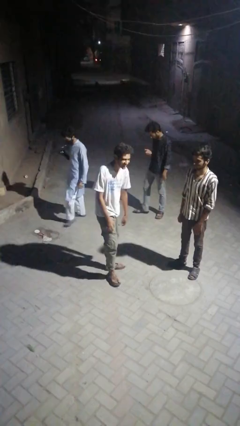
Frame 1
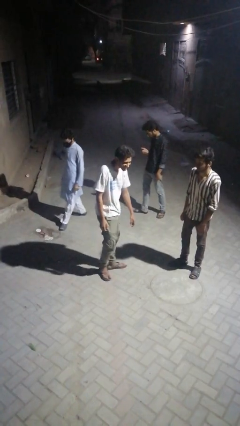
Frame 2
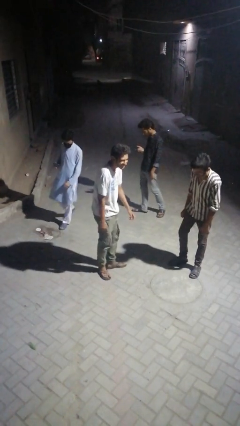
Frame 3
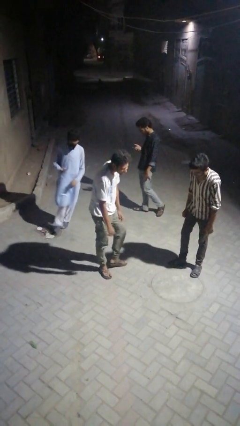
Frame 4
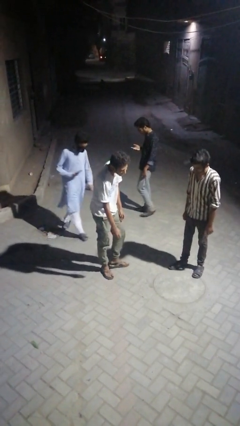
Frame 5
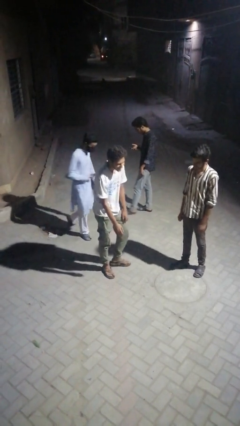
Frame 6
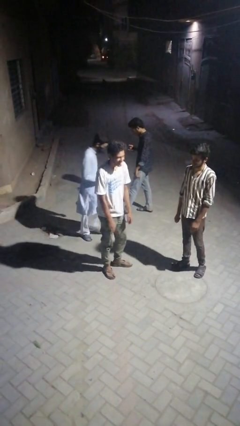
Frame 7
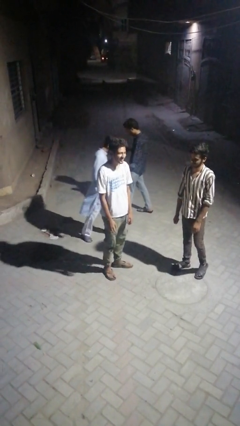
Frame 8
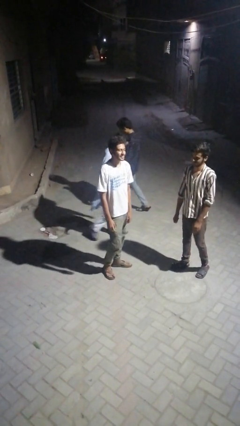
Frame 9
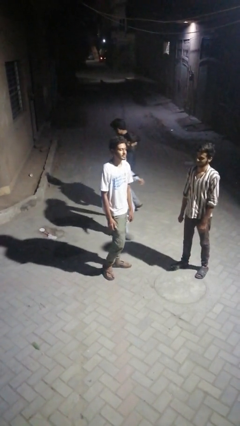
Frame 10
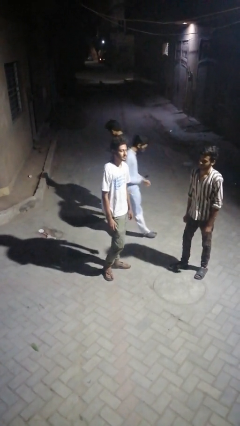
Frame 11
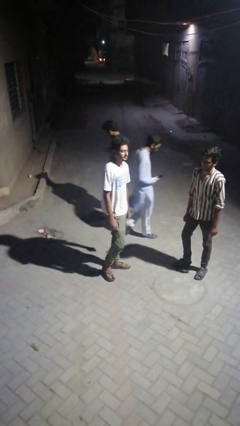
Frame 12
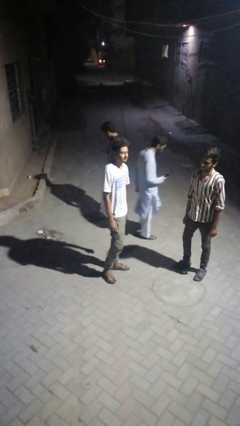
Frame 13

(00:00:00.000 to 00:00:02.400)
person laughs with person

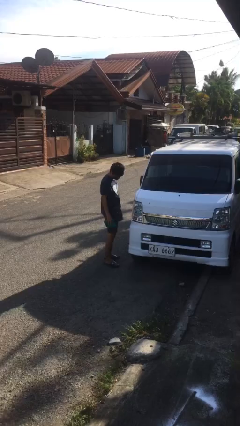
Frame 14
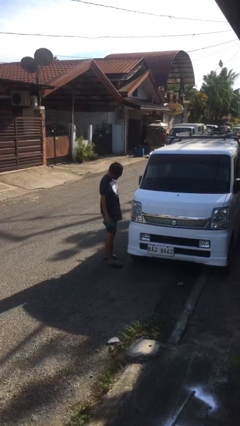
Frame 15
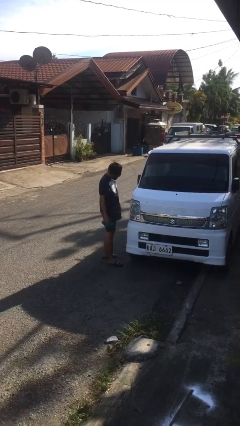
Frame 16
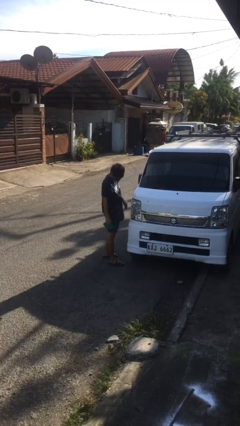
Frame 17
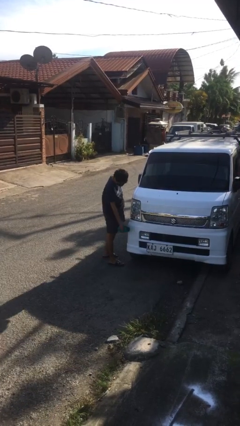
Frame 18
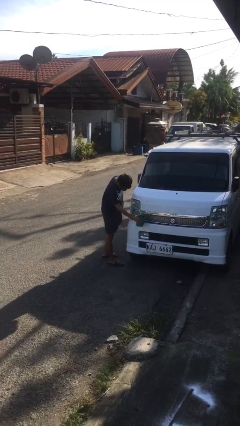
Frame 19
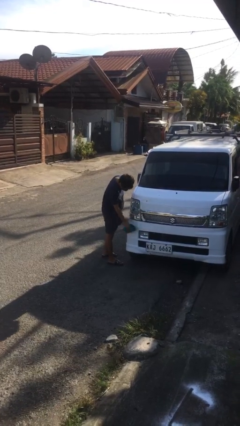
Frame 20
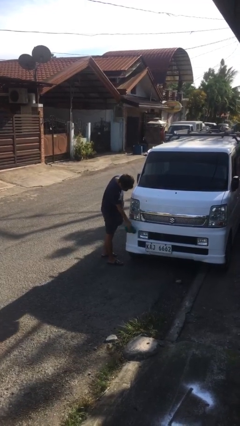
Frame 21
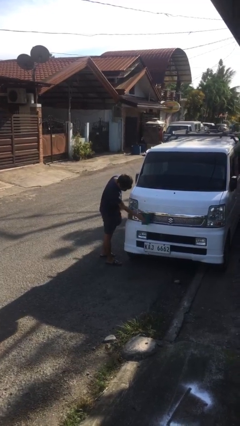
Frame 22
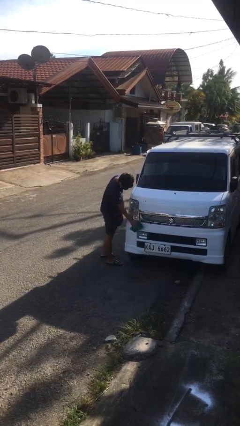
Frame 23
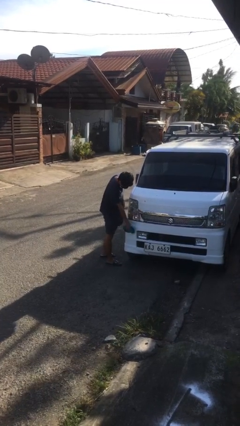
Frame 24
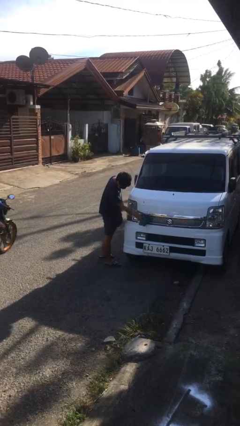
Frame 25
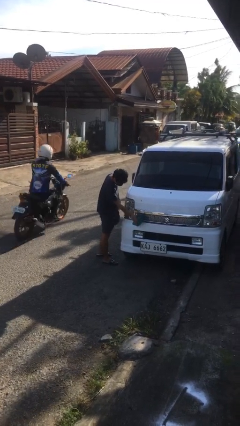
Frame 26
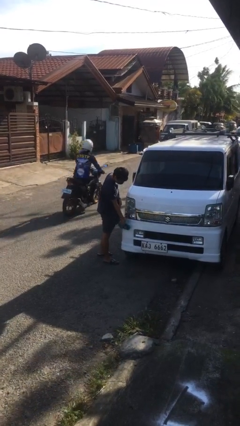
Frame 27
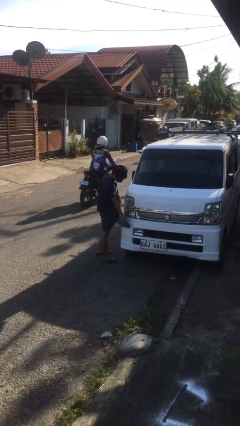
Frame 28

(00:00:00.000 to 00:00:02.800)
person polishes car with rag

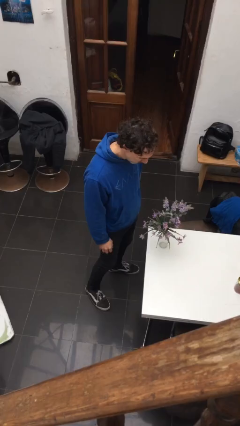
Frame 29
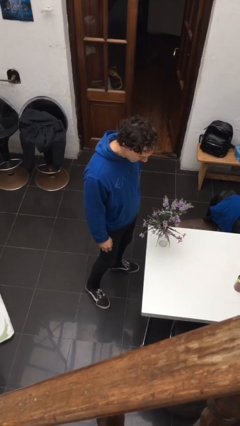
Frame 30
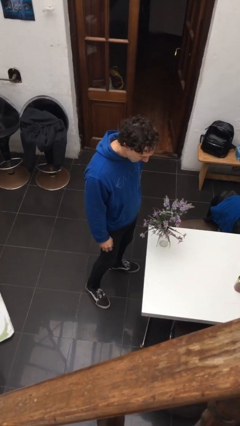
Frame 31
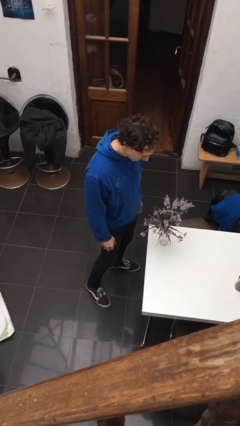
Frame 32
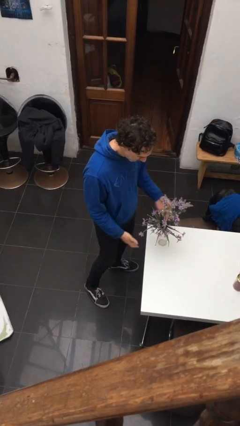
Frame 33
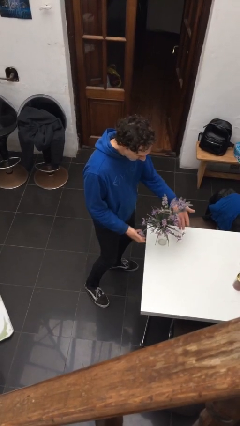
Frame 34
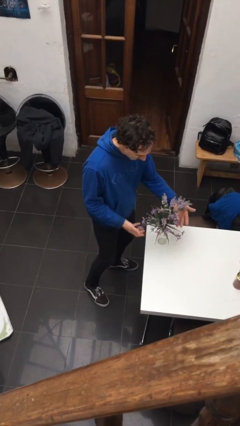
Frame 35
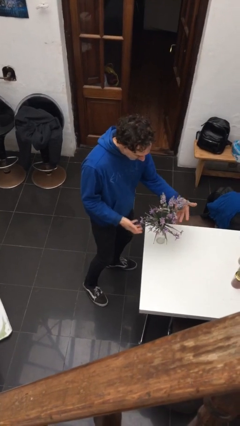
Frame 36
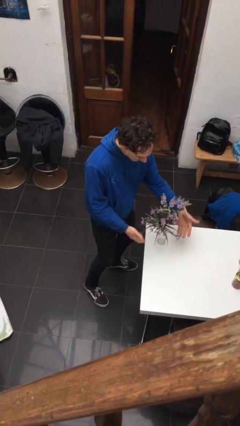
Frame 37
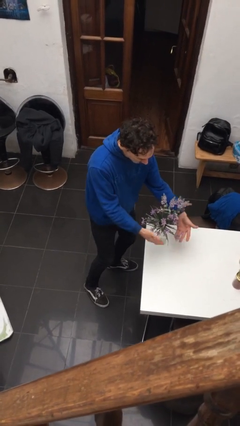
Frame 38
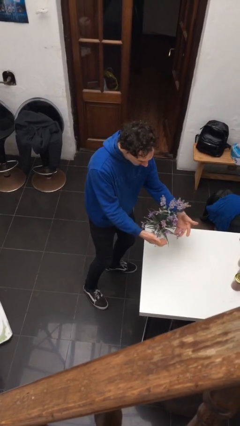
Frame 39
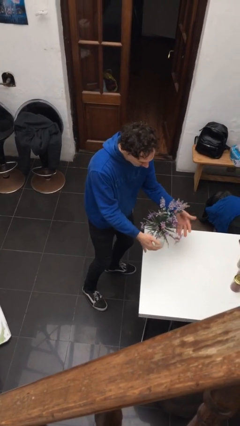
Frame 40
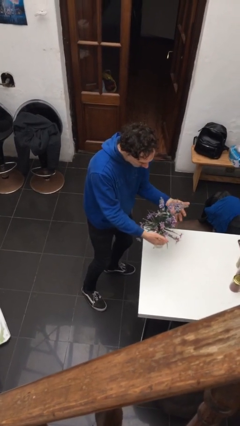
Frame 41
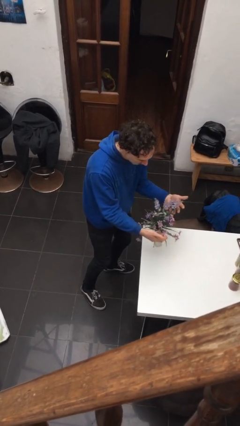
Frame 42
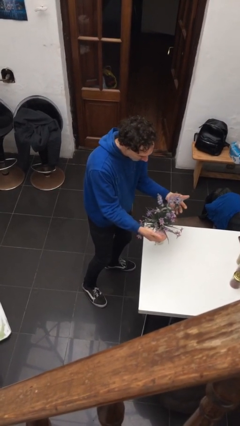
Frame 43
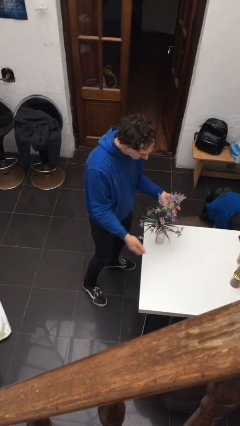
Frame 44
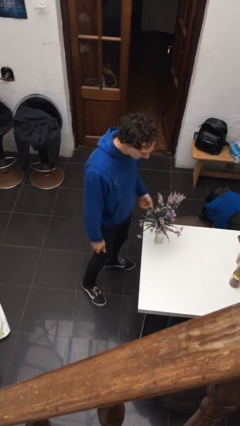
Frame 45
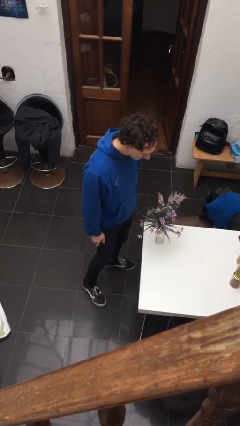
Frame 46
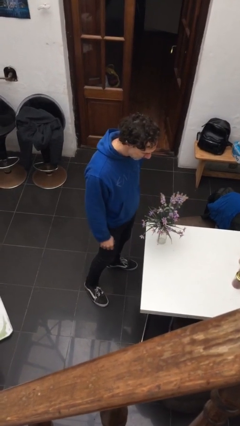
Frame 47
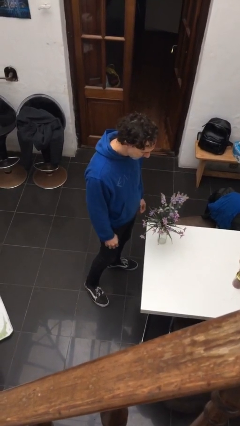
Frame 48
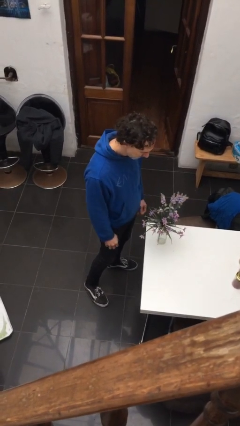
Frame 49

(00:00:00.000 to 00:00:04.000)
person arranges flowers in vase

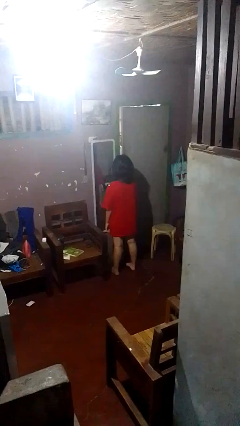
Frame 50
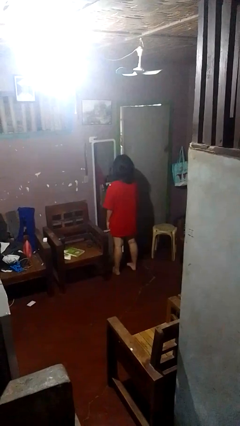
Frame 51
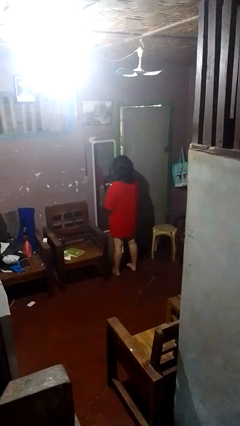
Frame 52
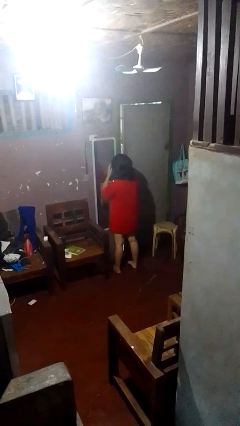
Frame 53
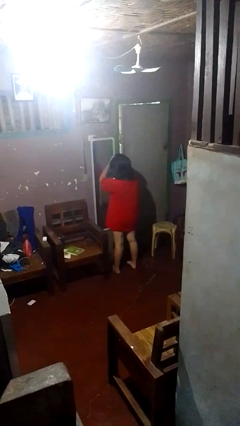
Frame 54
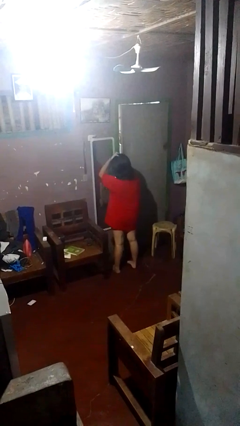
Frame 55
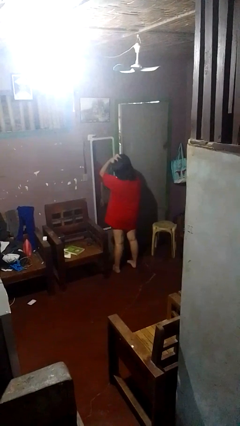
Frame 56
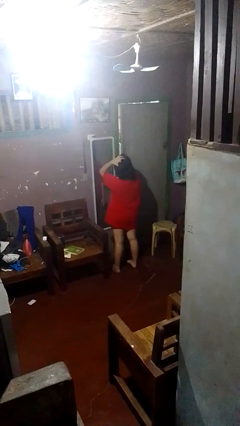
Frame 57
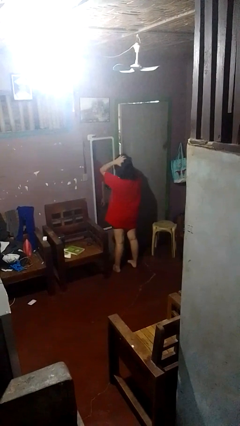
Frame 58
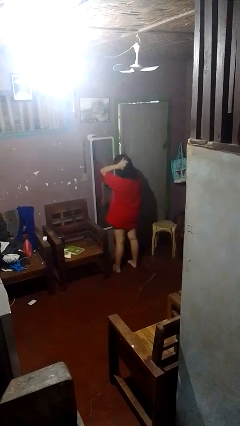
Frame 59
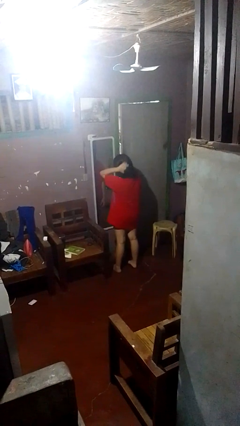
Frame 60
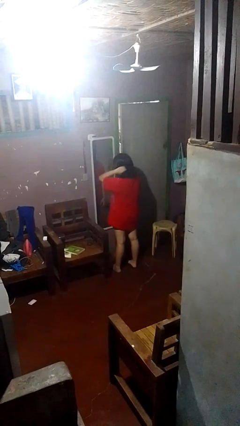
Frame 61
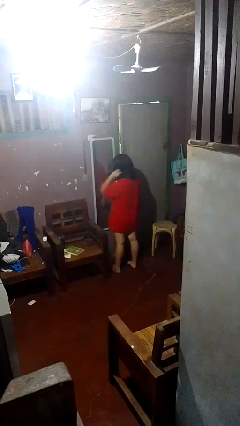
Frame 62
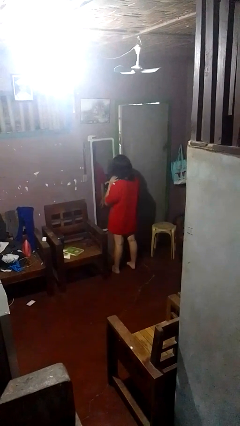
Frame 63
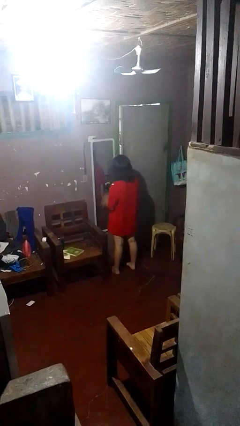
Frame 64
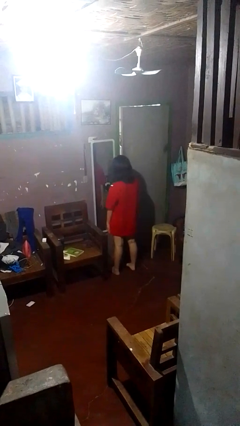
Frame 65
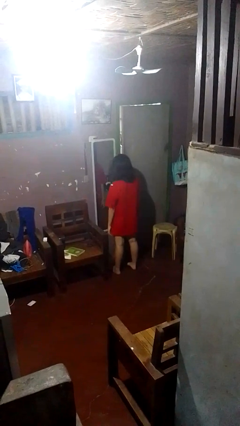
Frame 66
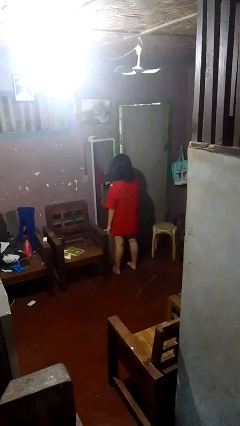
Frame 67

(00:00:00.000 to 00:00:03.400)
person strokes hair

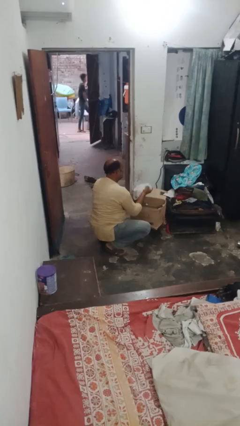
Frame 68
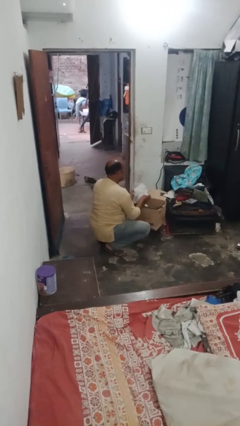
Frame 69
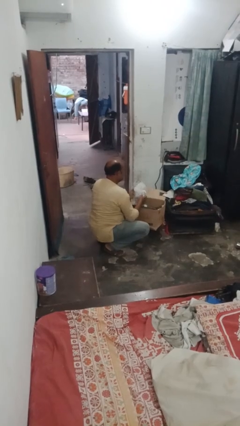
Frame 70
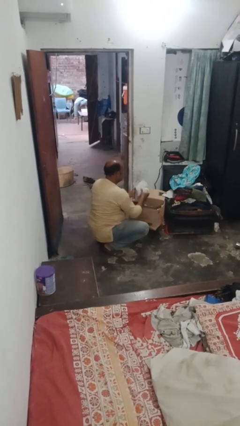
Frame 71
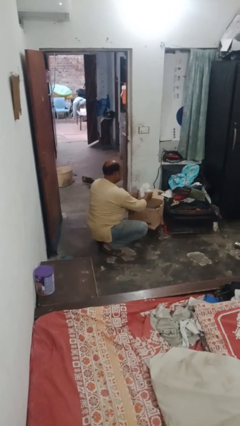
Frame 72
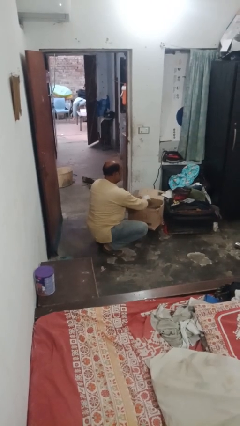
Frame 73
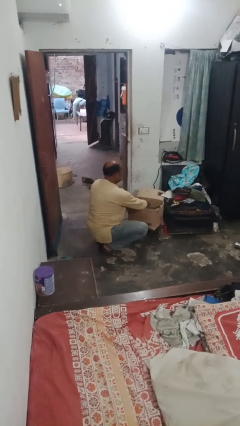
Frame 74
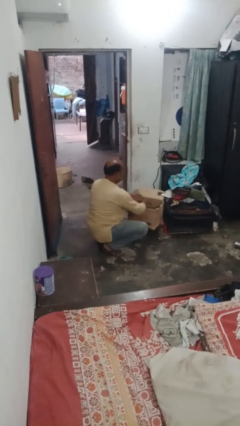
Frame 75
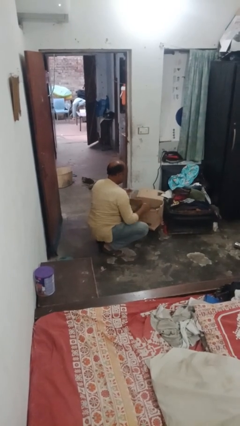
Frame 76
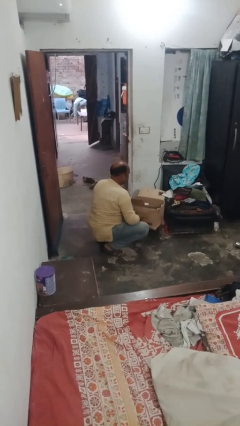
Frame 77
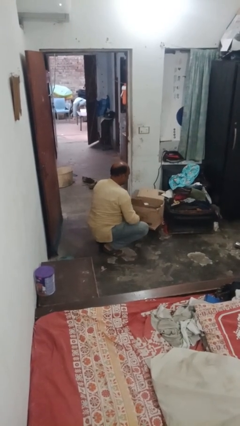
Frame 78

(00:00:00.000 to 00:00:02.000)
person puts object into box

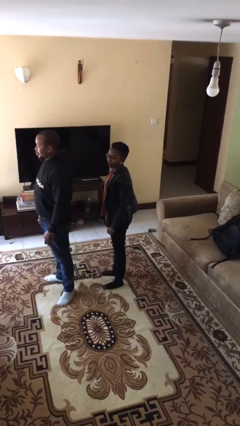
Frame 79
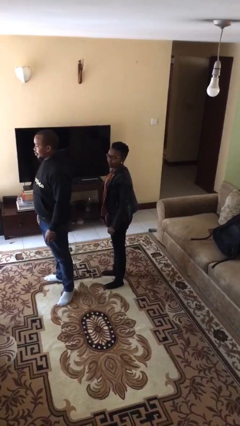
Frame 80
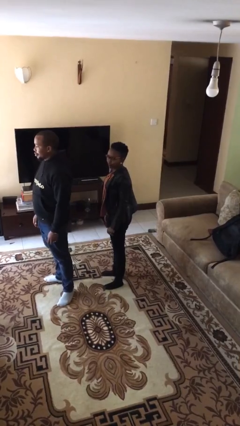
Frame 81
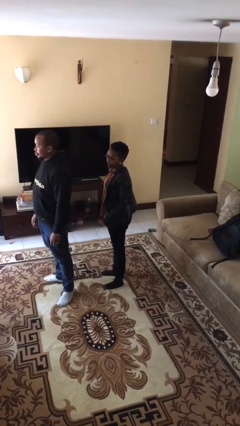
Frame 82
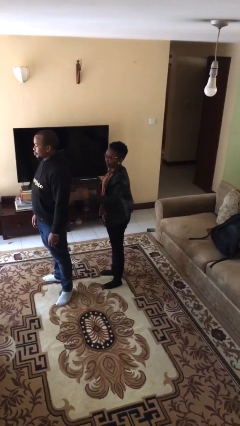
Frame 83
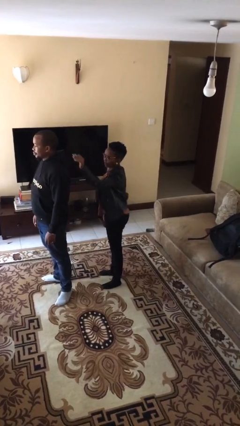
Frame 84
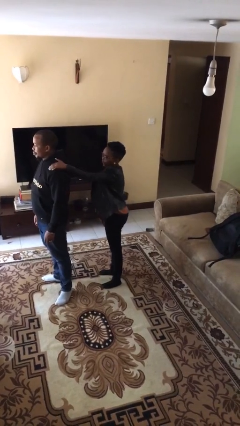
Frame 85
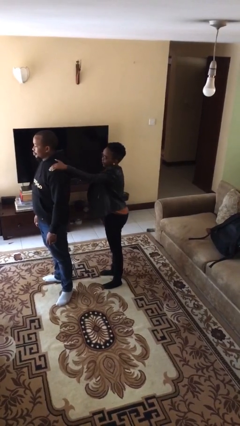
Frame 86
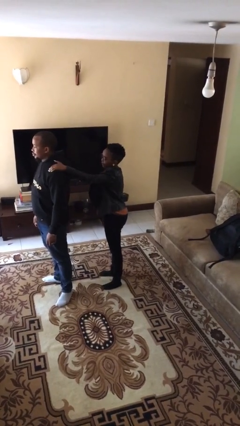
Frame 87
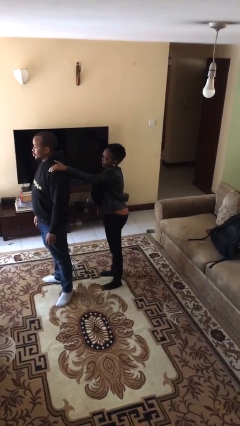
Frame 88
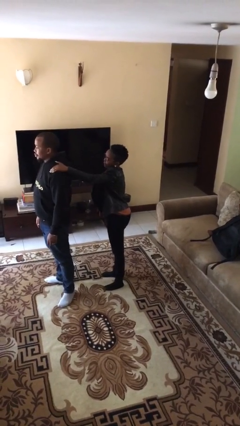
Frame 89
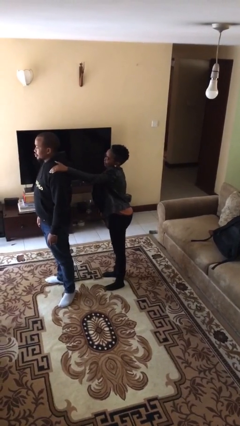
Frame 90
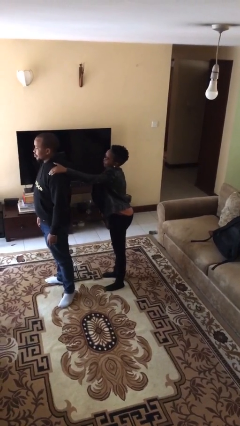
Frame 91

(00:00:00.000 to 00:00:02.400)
person grabs person by shoulder

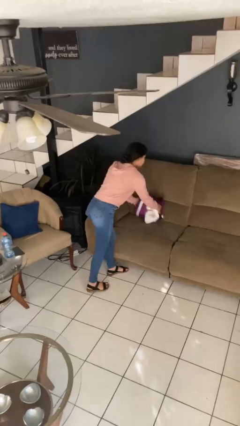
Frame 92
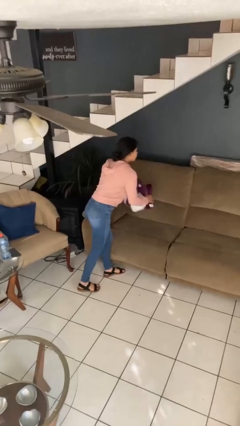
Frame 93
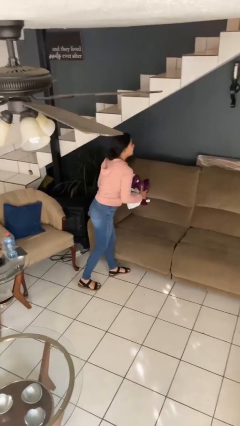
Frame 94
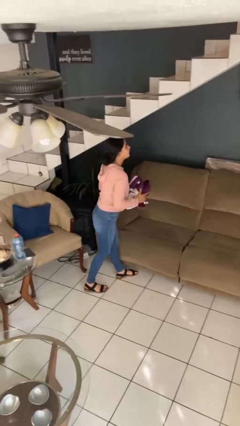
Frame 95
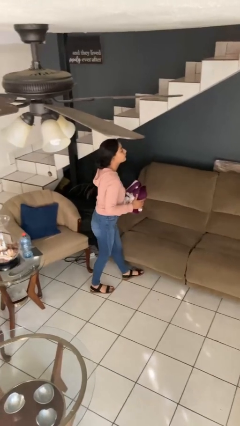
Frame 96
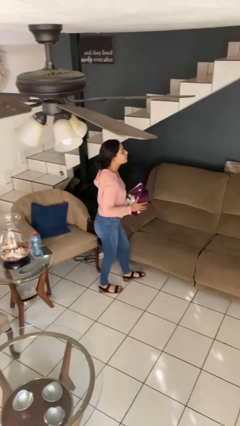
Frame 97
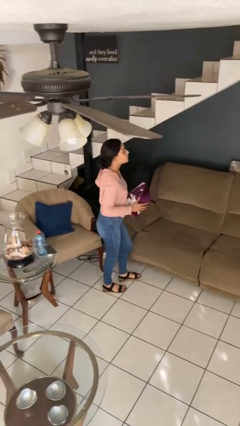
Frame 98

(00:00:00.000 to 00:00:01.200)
person picks up object from couch
